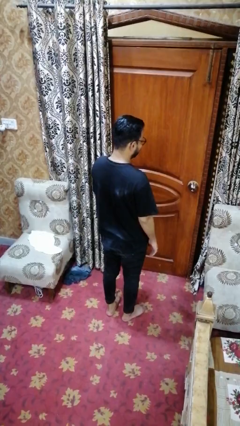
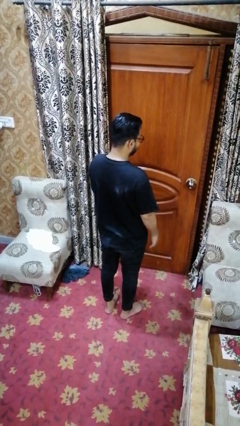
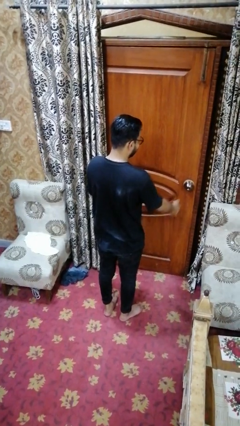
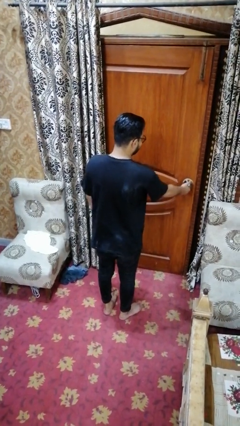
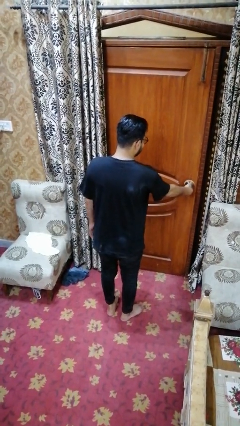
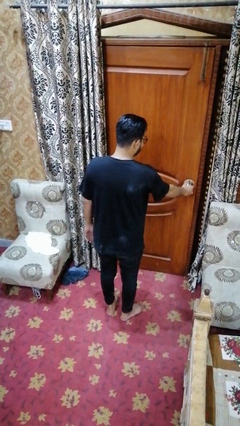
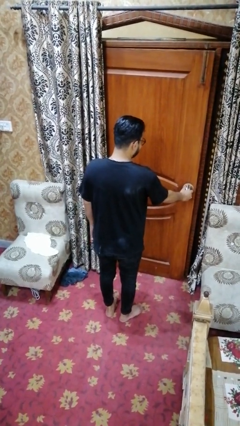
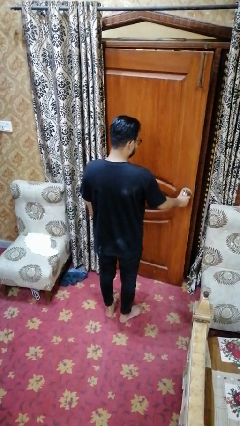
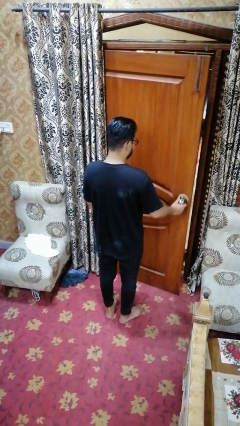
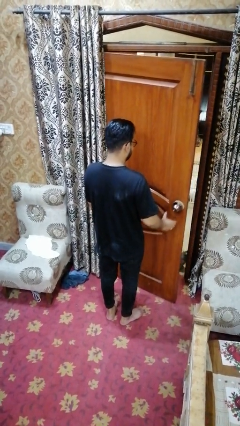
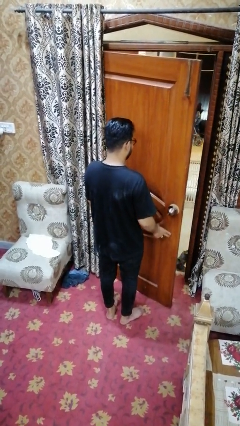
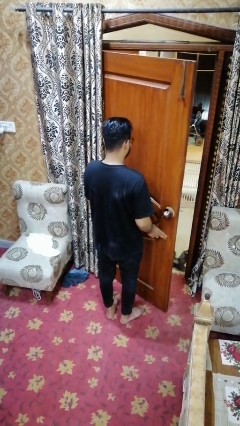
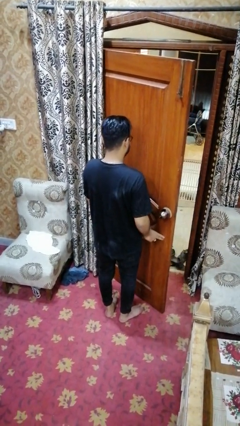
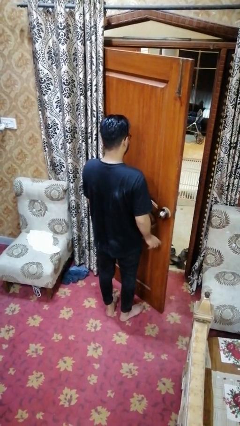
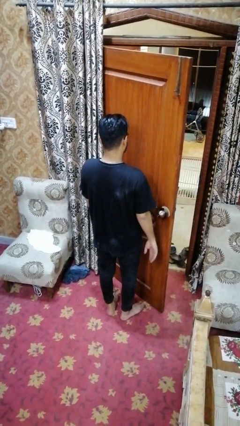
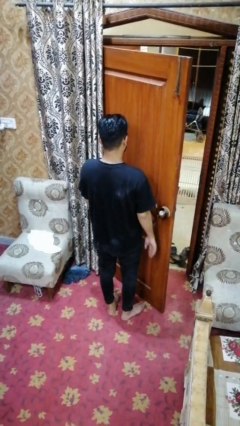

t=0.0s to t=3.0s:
person opens facility door

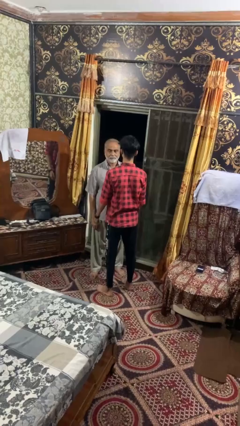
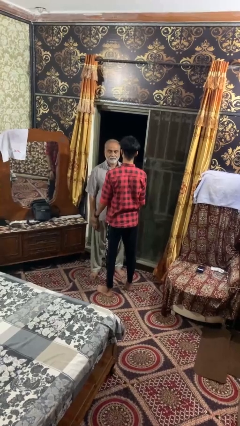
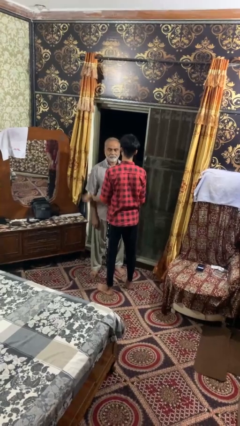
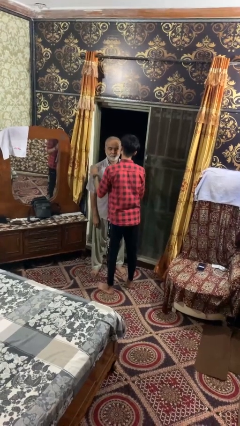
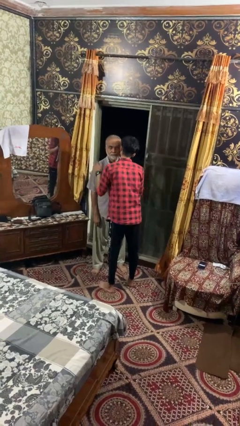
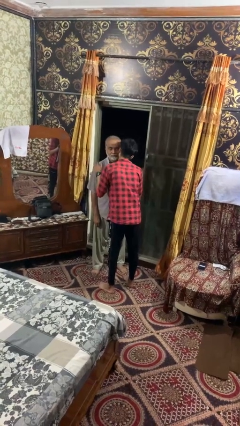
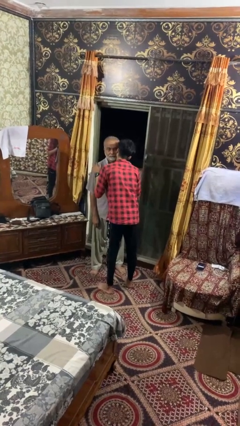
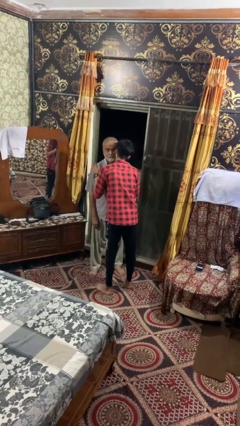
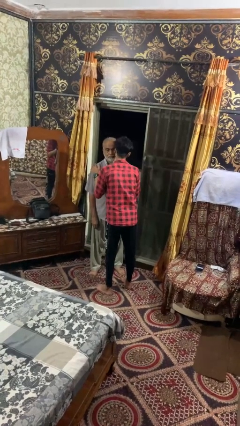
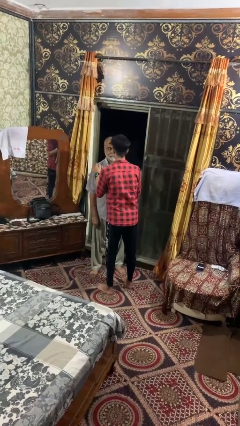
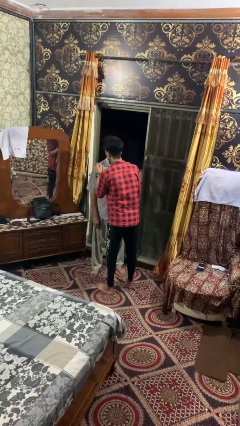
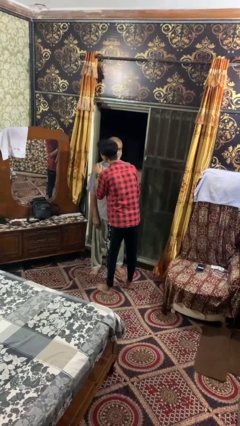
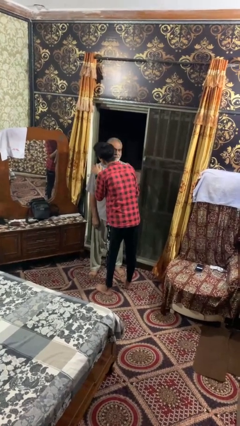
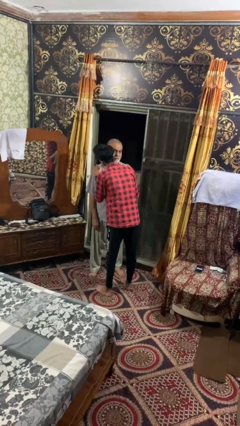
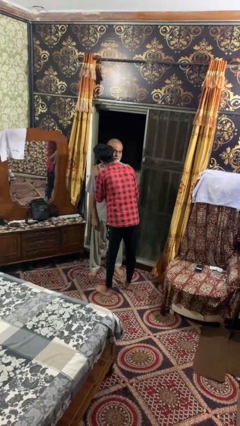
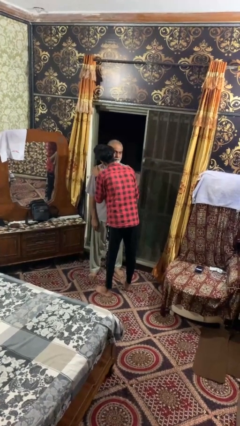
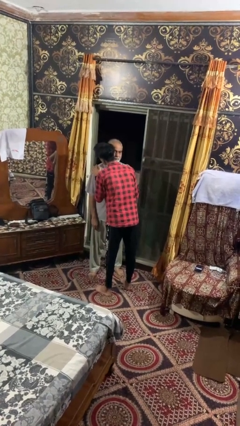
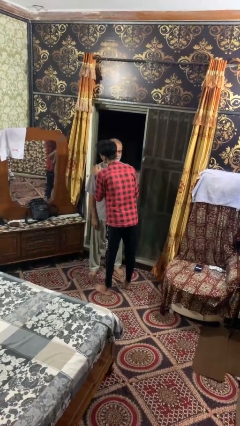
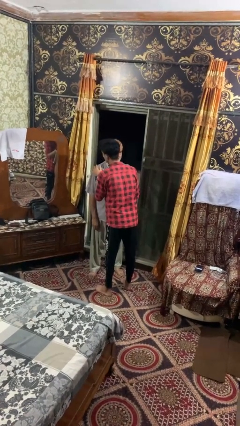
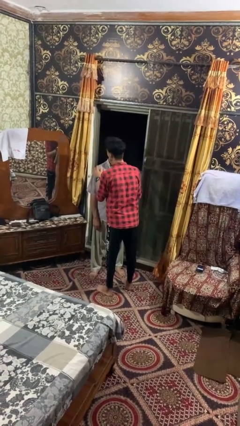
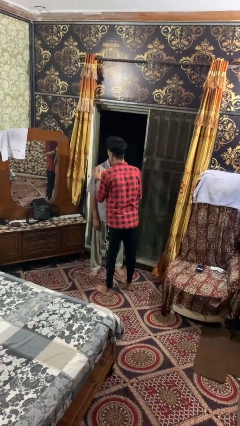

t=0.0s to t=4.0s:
person kisses cheek of person

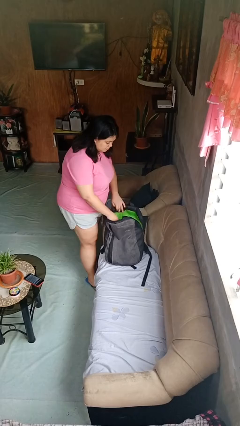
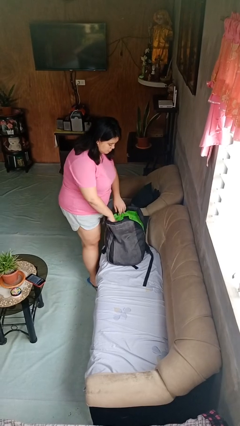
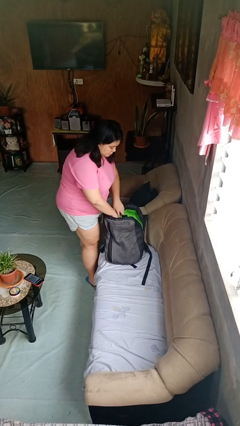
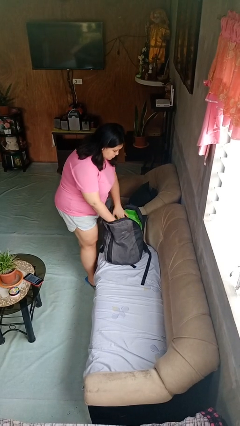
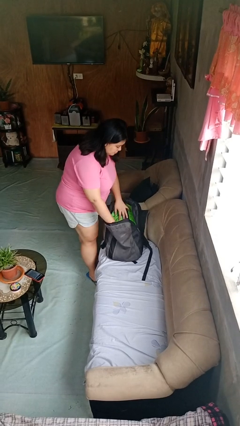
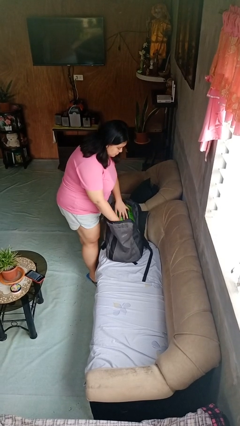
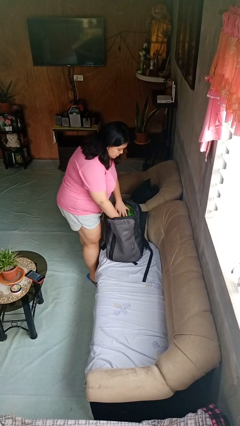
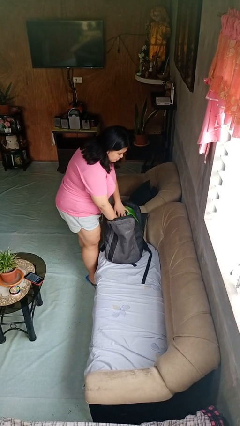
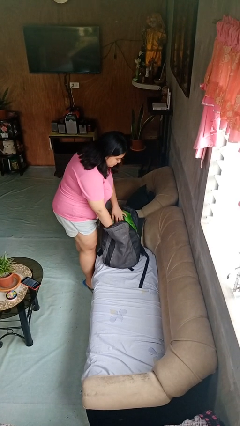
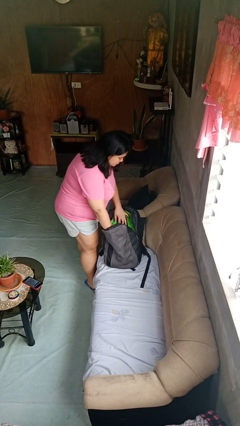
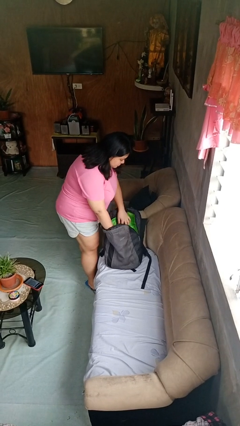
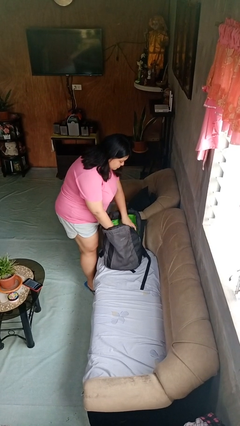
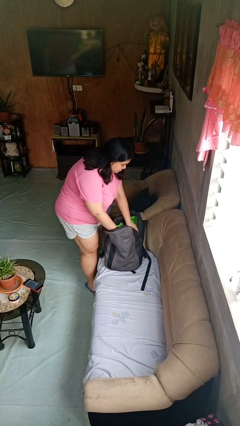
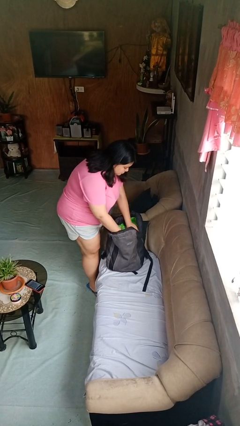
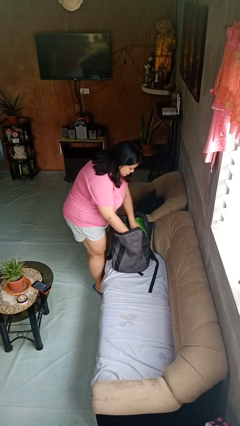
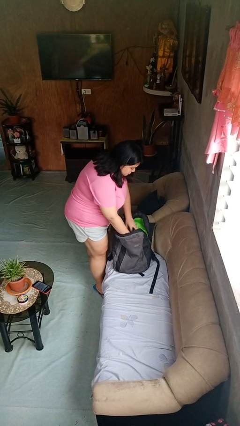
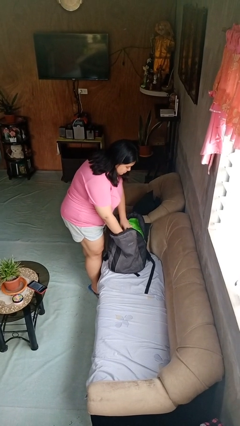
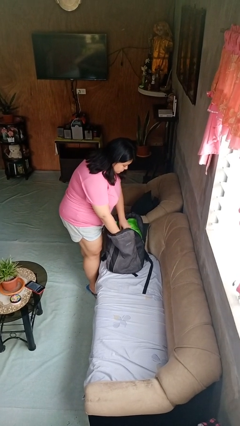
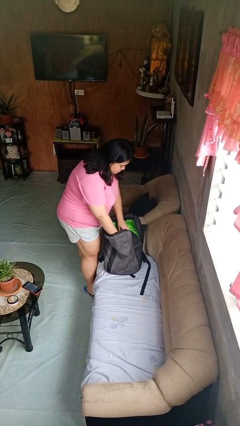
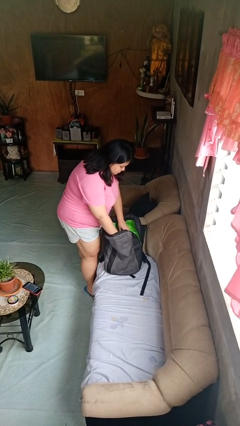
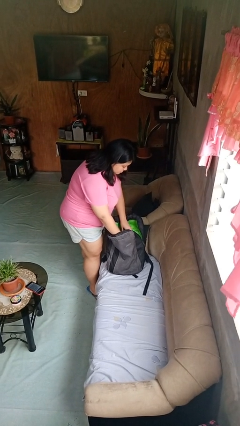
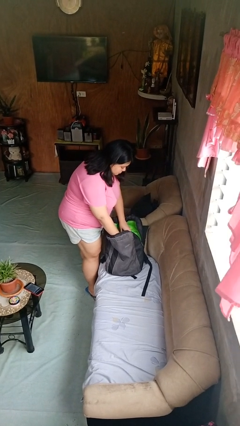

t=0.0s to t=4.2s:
person searches in backpack

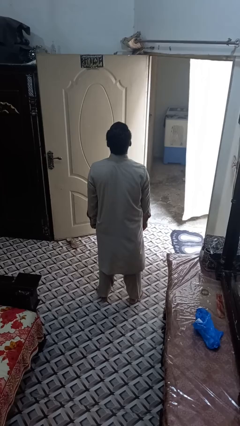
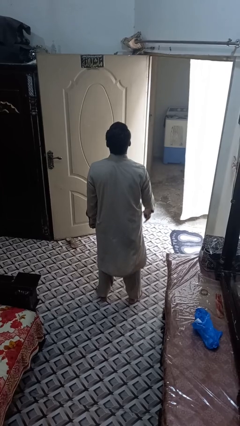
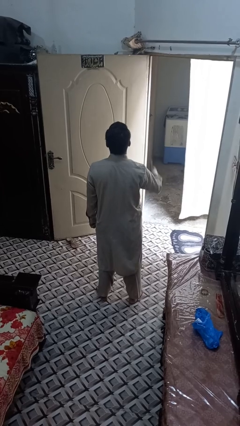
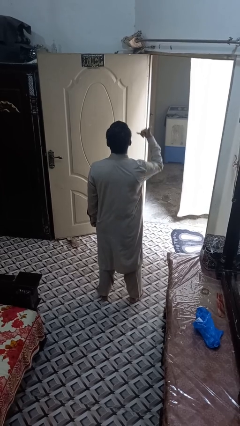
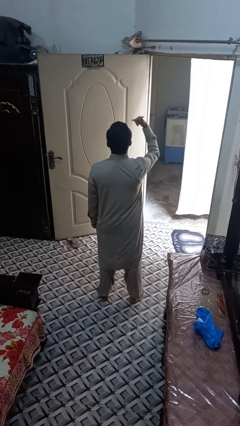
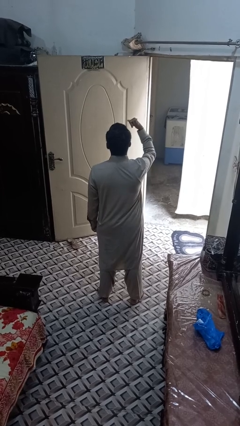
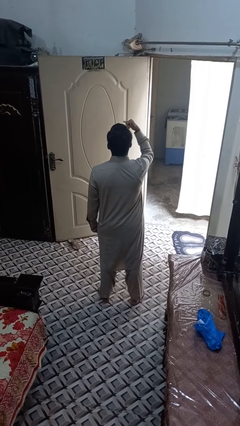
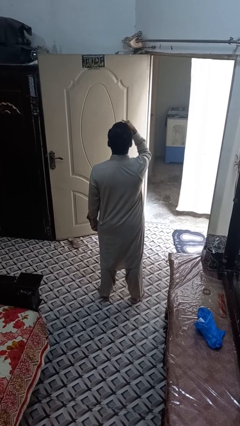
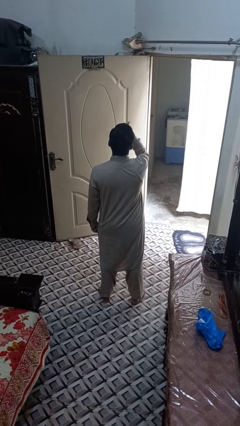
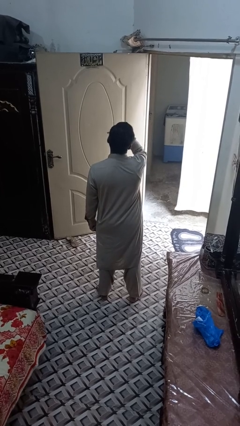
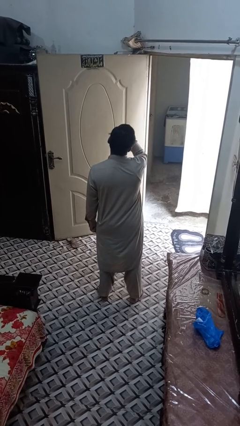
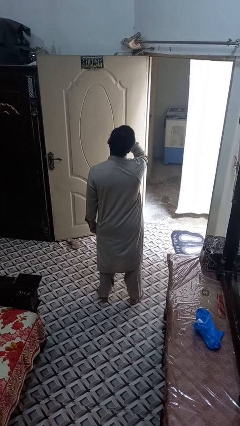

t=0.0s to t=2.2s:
person gestures hang loose

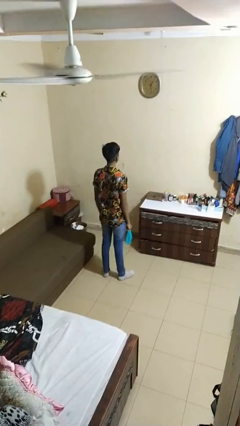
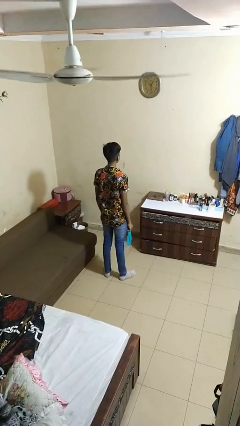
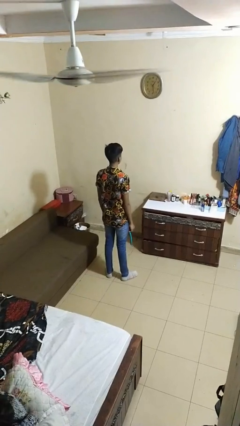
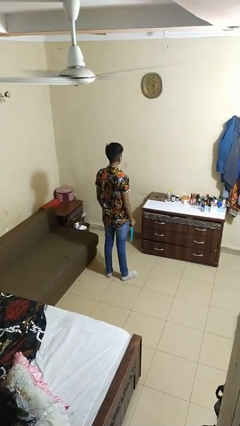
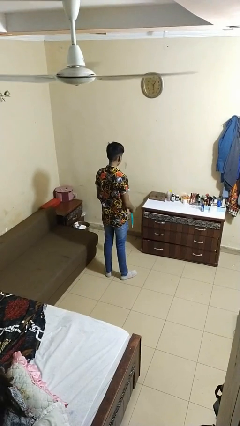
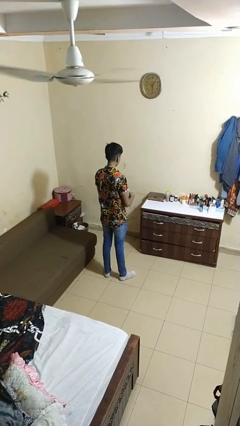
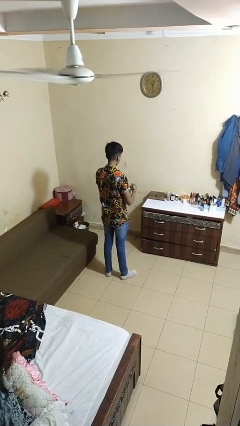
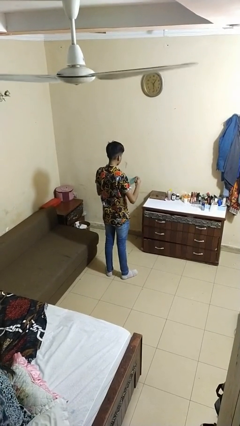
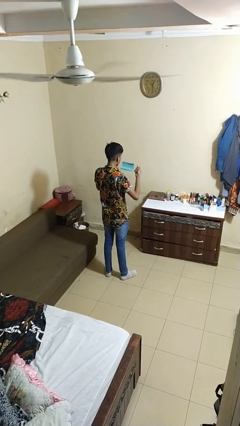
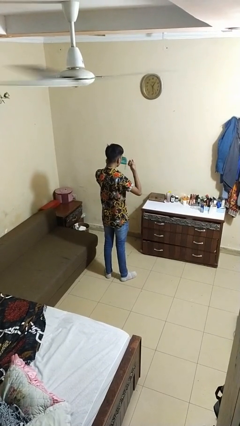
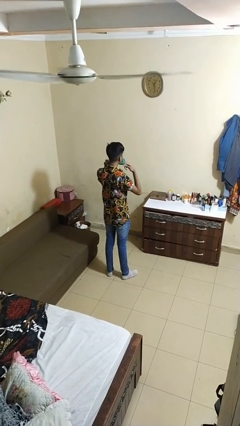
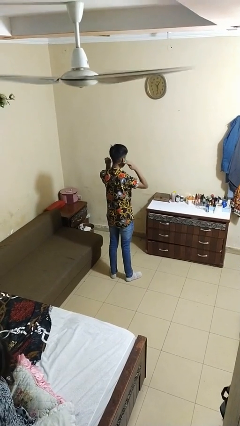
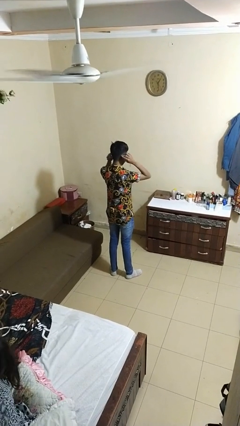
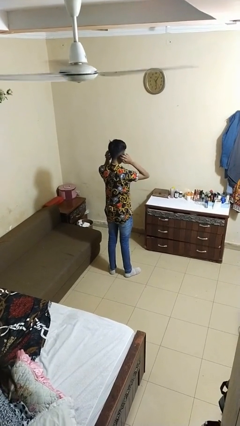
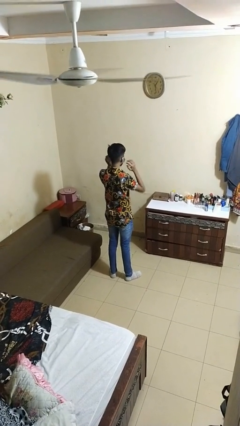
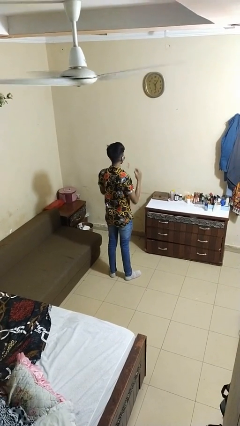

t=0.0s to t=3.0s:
person puts on facemask

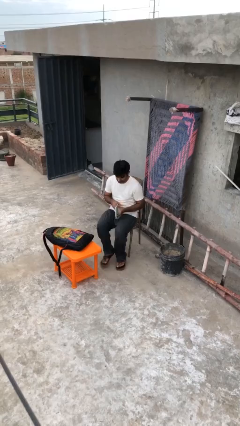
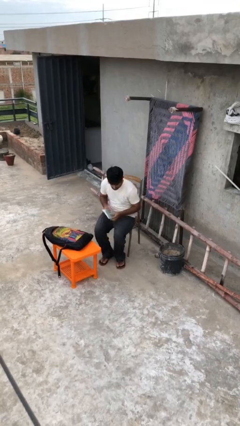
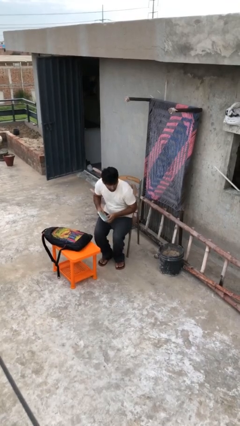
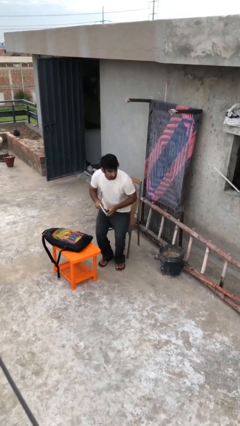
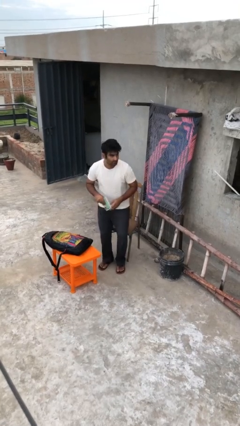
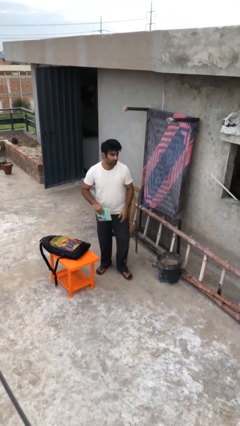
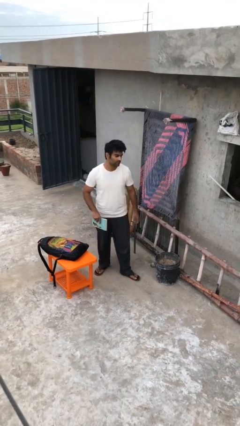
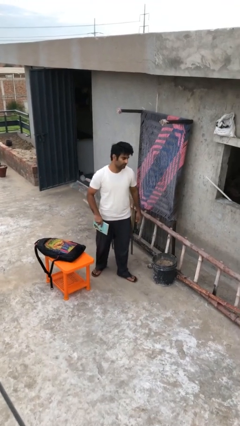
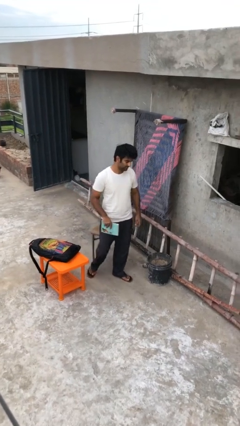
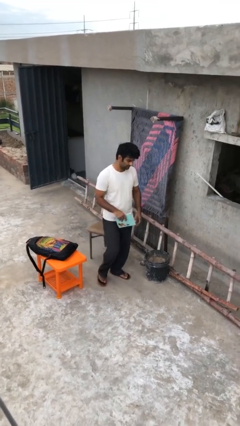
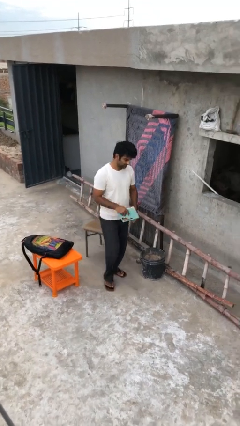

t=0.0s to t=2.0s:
person stands up
